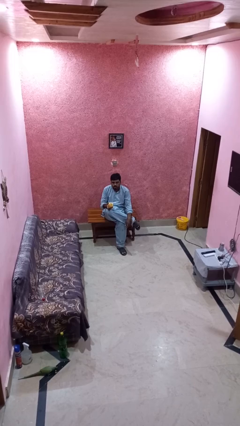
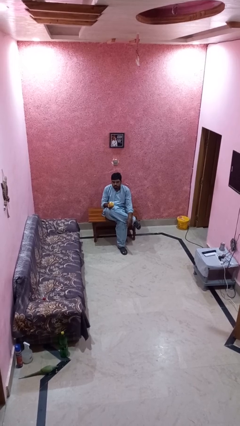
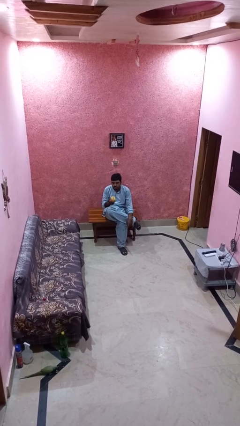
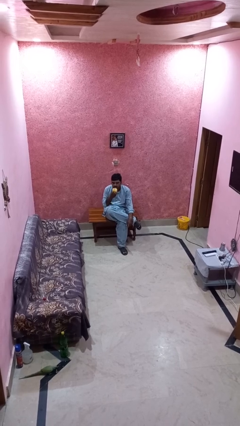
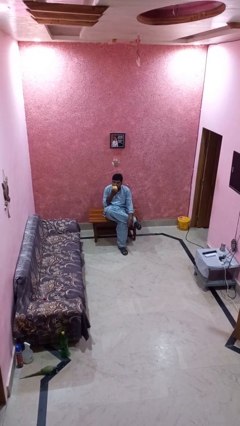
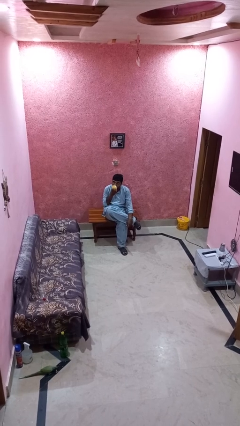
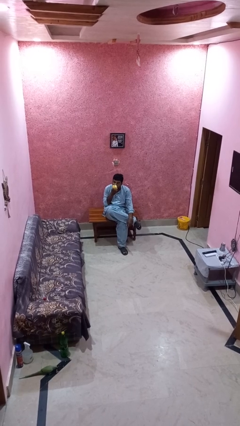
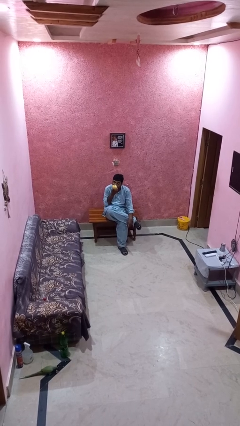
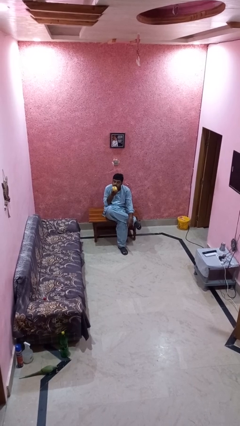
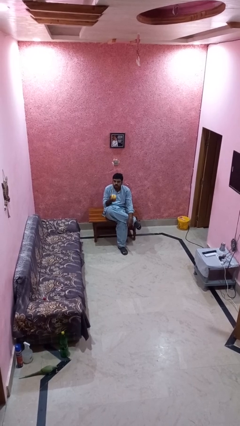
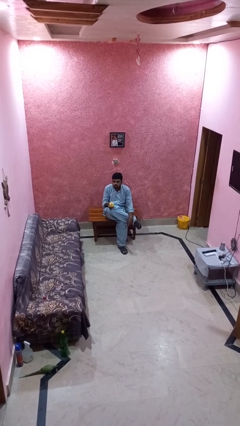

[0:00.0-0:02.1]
person eats apple

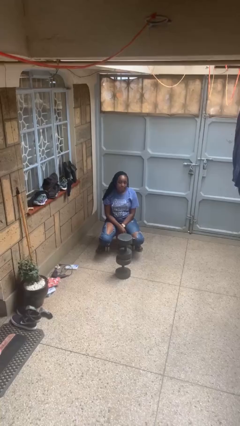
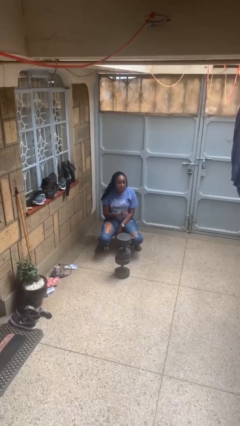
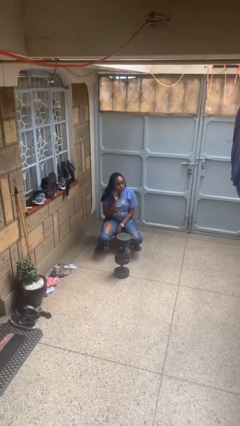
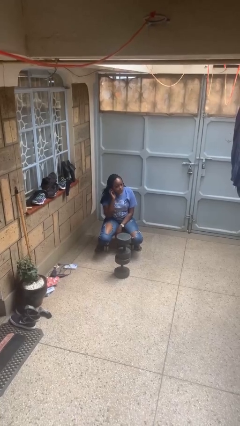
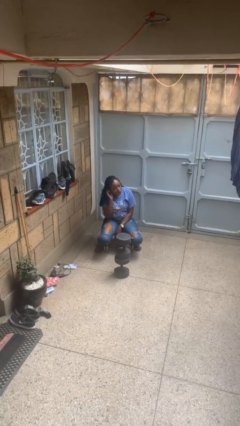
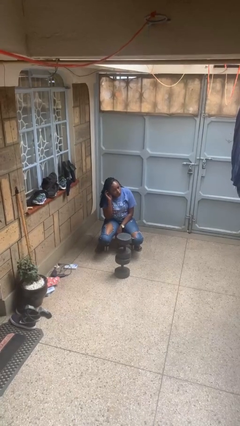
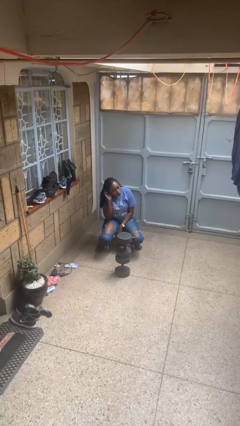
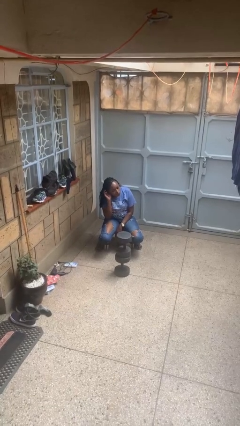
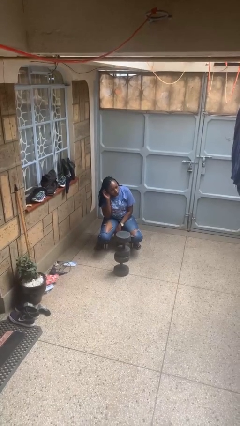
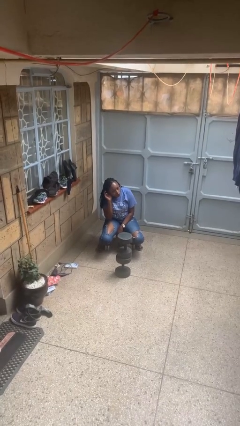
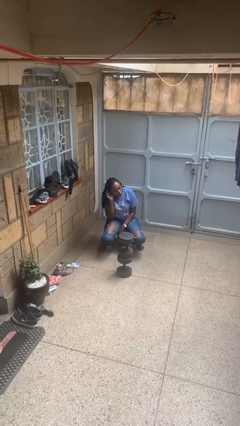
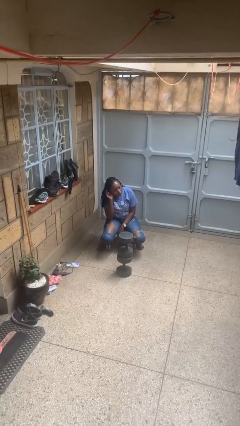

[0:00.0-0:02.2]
person gestures listen closely

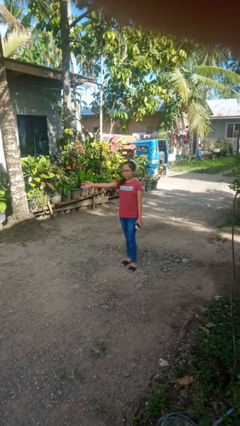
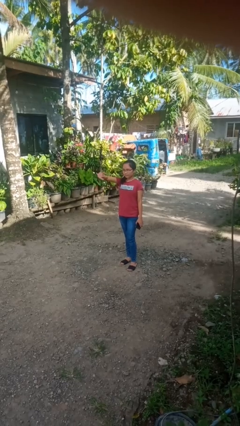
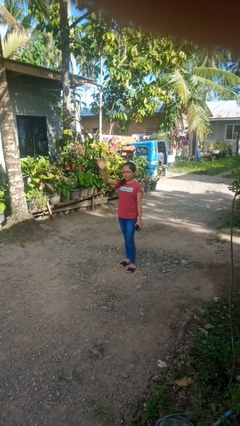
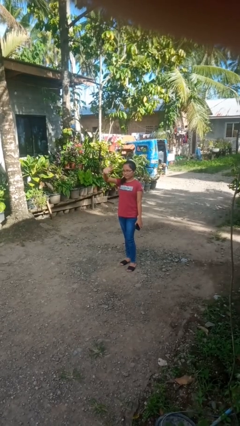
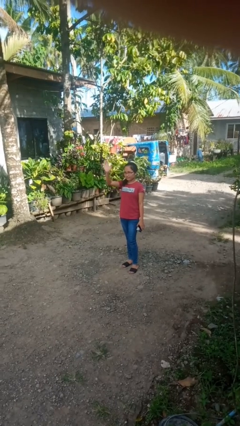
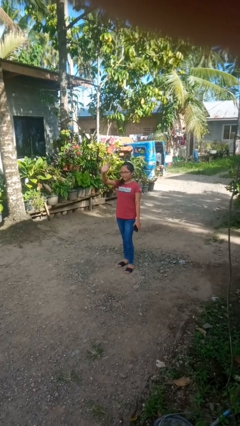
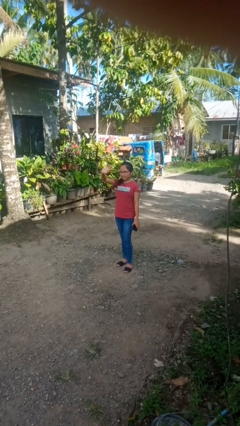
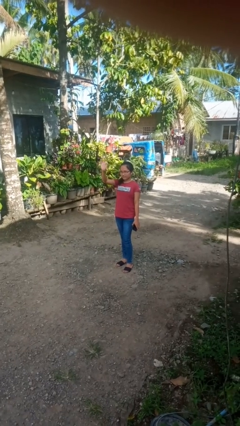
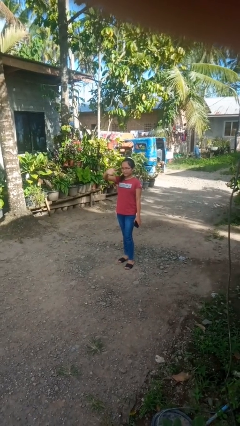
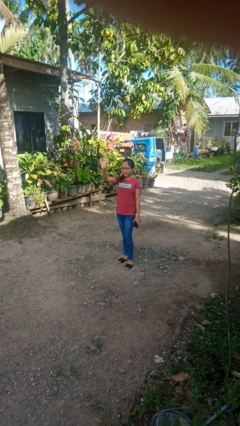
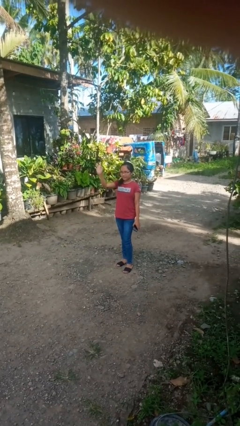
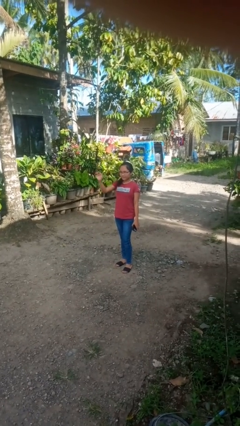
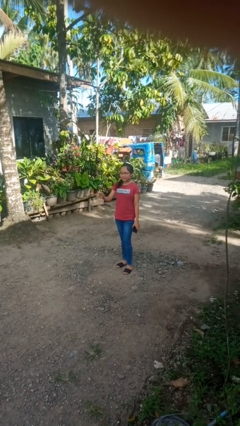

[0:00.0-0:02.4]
person waves at person

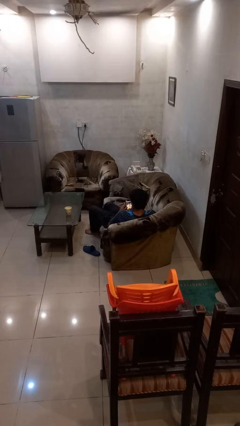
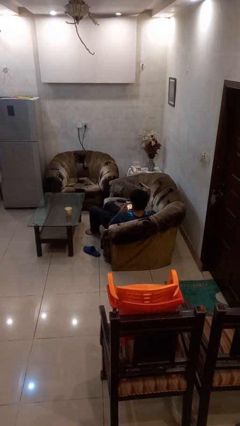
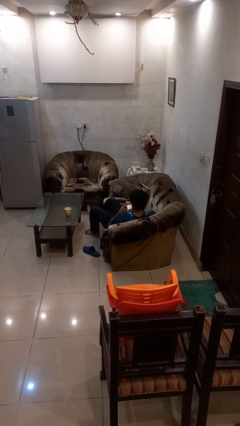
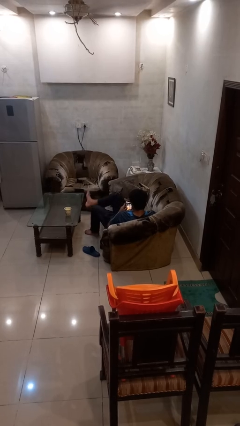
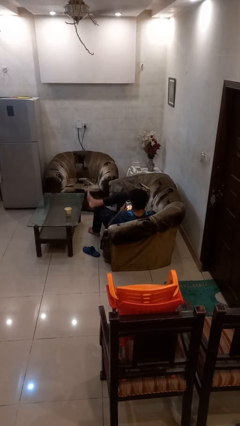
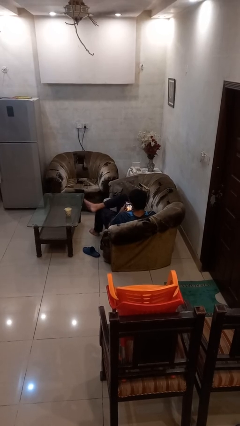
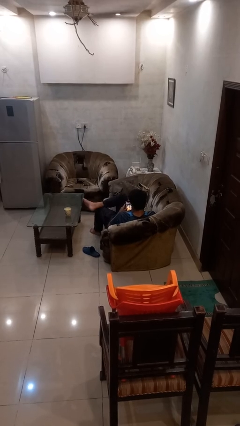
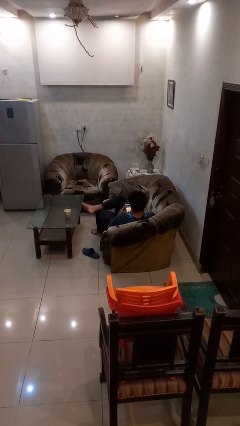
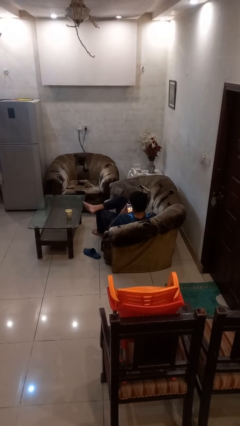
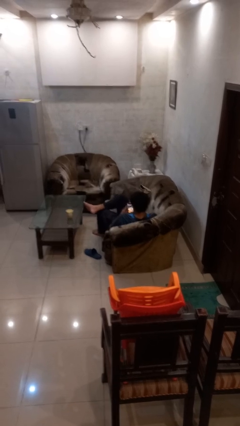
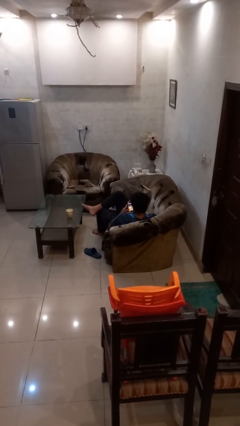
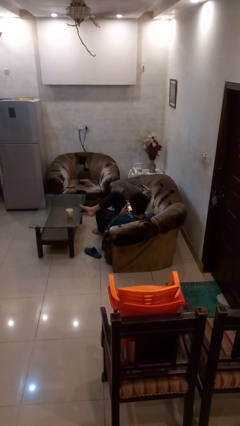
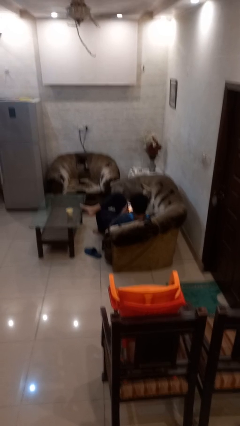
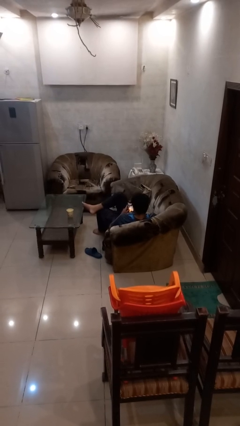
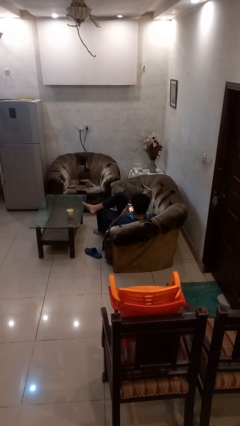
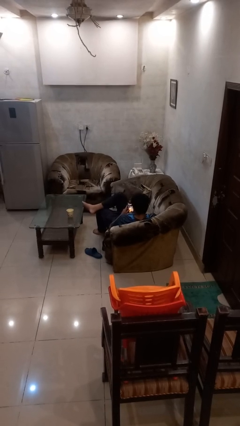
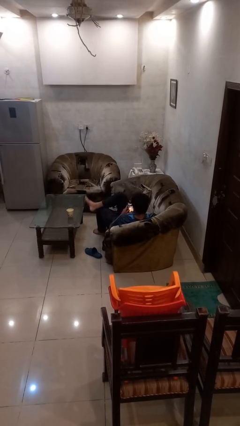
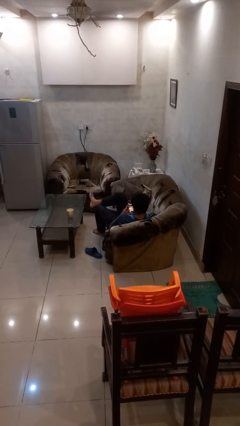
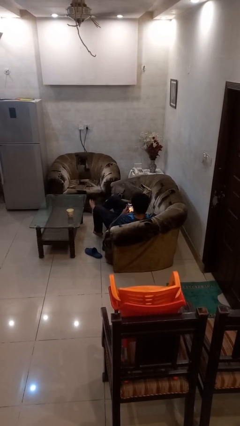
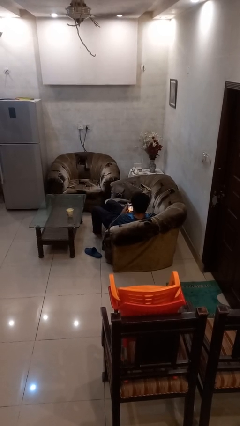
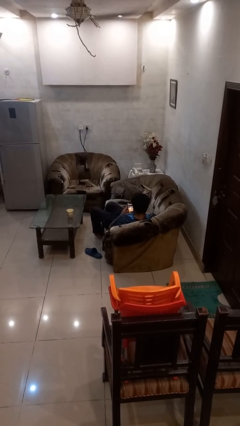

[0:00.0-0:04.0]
person crosses legs

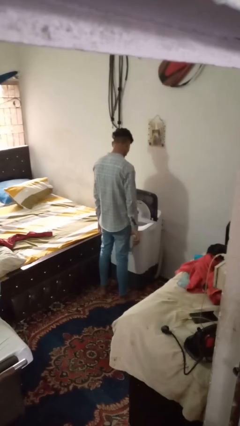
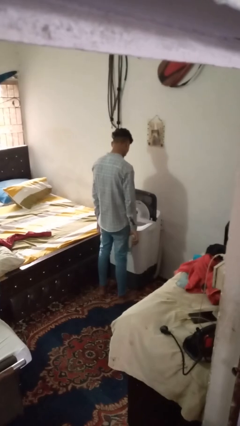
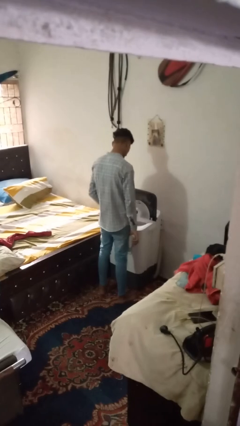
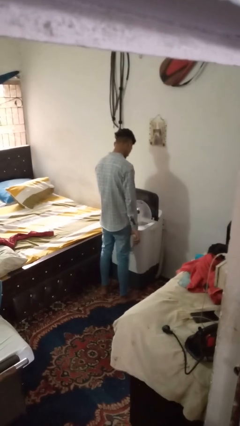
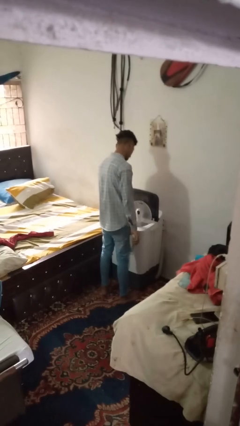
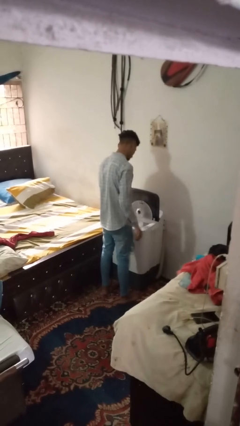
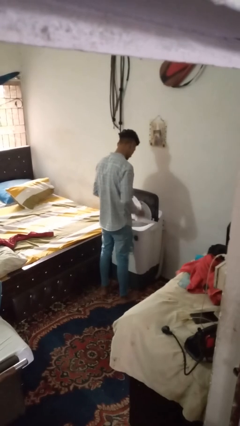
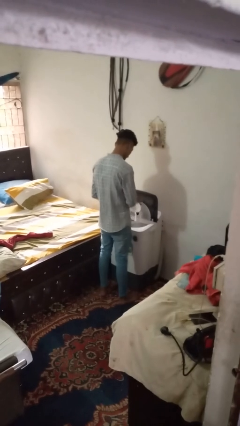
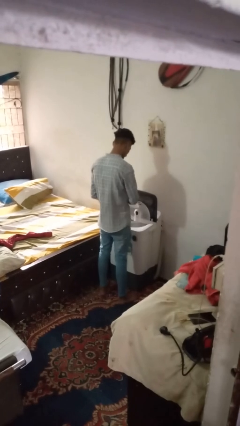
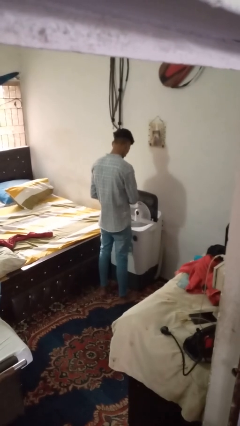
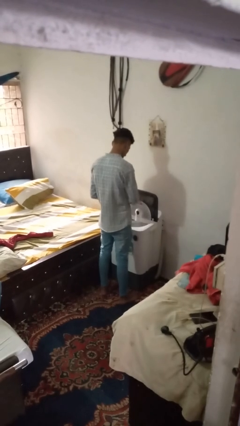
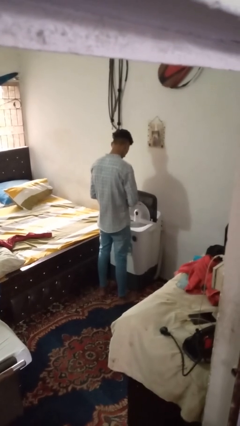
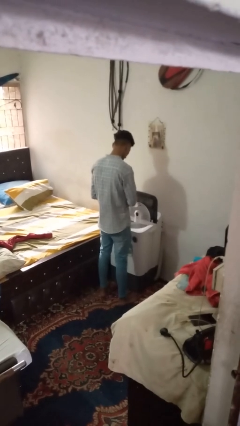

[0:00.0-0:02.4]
person cleans dryer lint trap

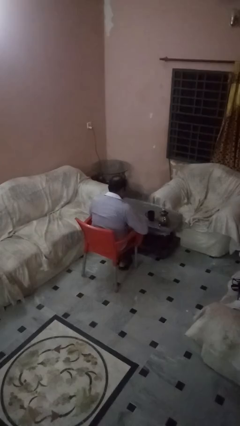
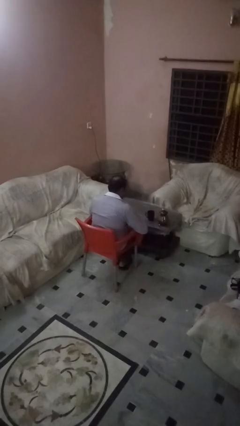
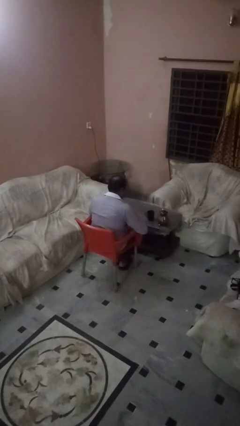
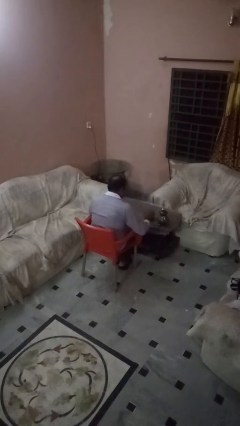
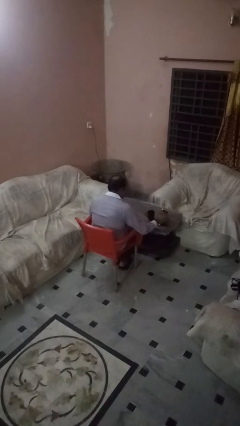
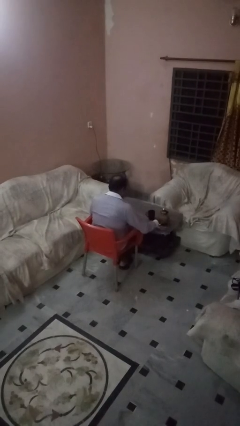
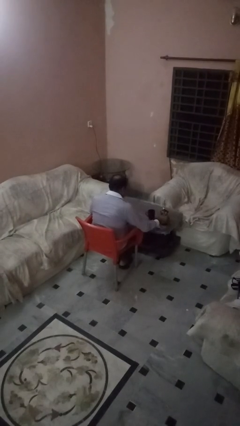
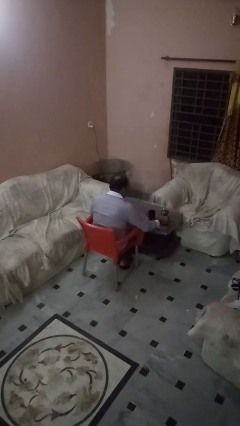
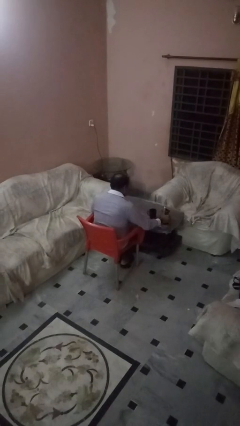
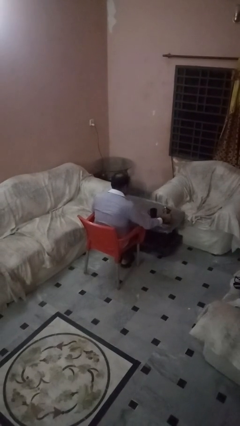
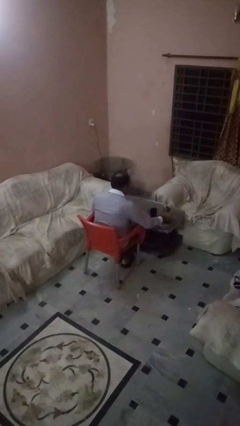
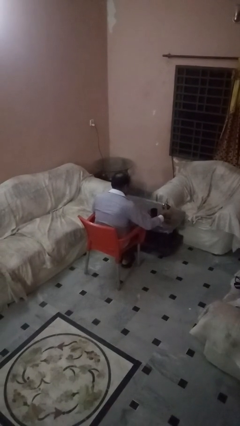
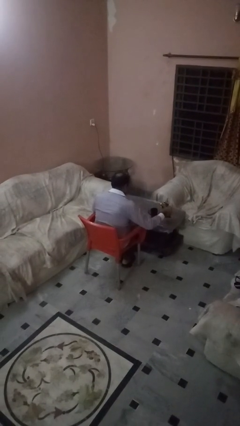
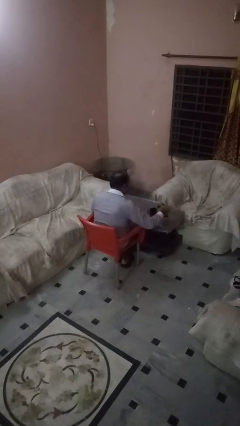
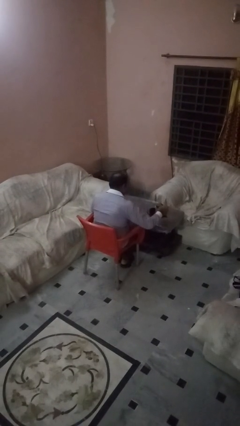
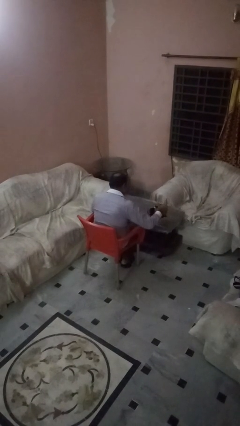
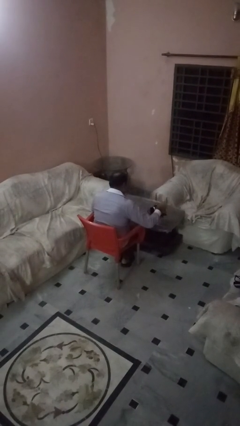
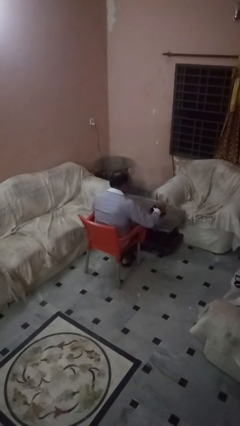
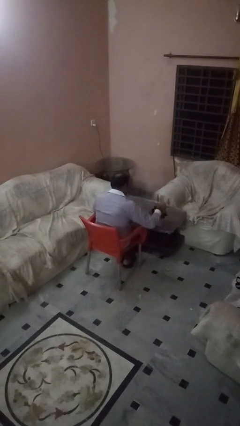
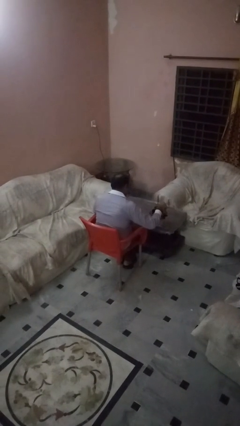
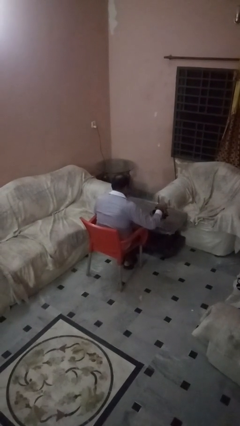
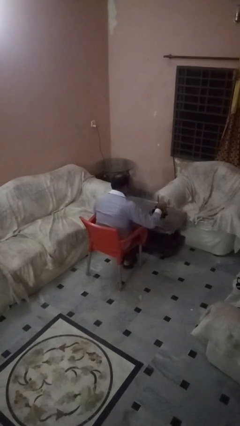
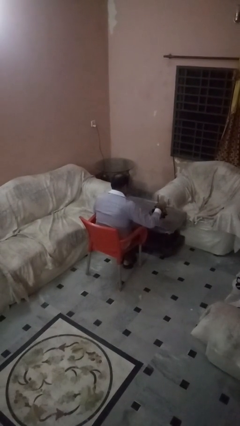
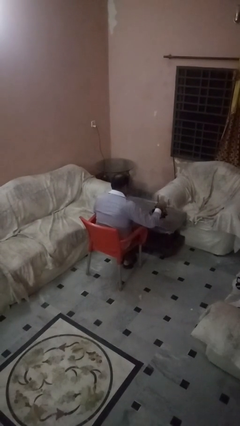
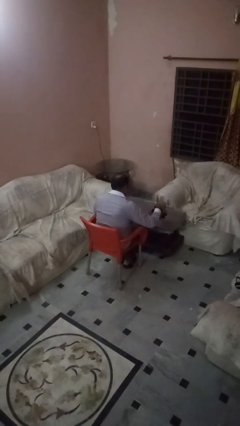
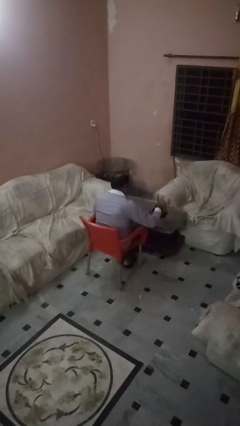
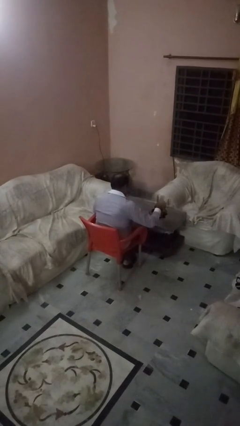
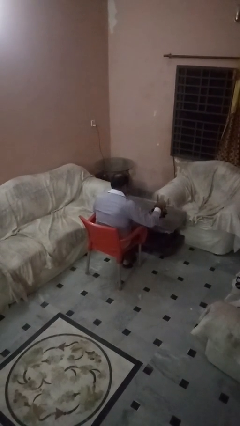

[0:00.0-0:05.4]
person pours coffee into mug
